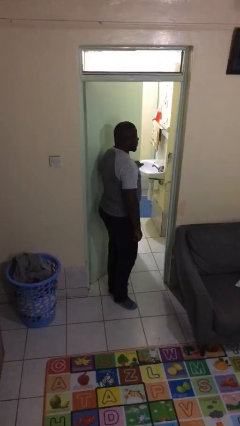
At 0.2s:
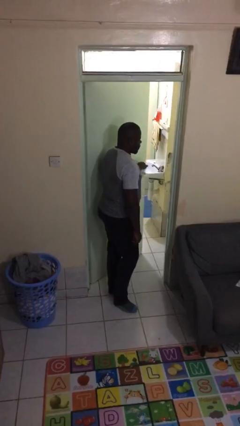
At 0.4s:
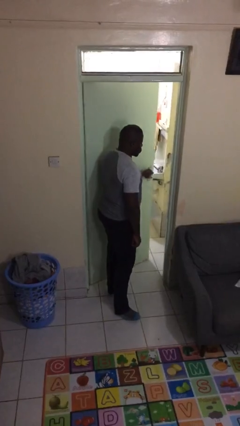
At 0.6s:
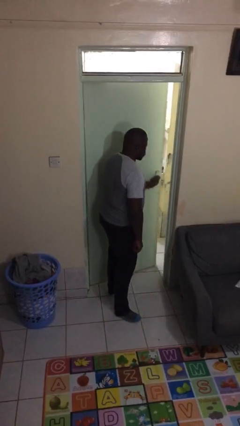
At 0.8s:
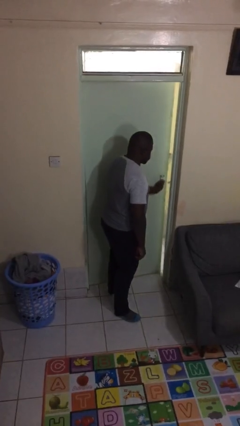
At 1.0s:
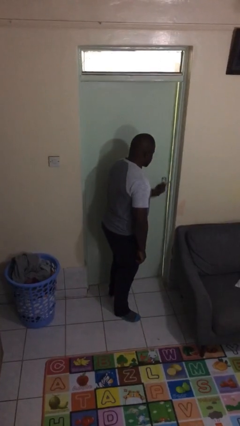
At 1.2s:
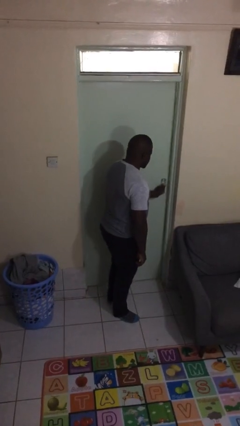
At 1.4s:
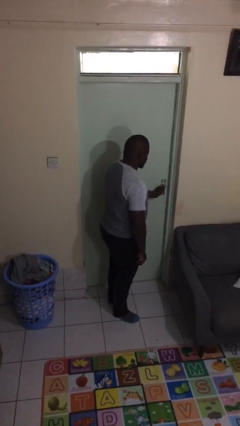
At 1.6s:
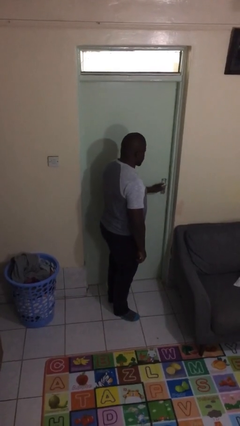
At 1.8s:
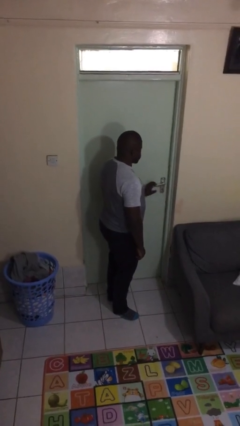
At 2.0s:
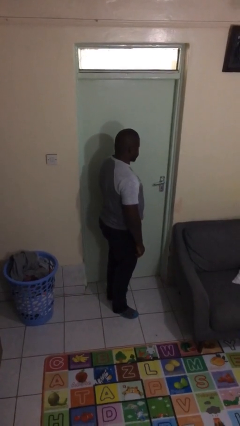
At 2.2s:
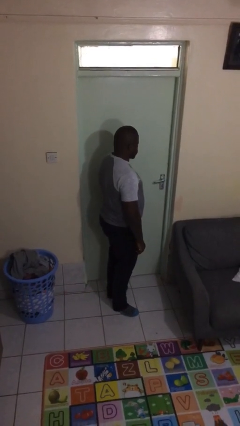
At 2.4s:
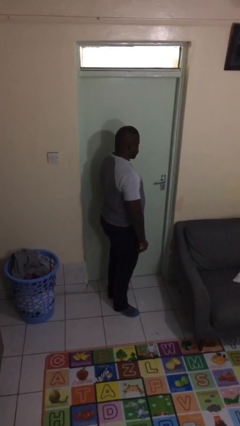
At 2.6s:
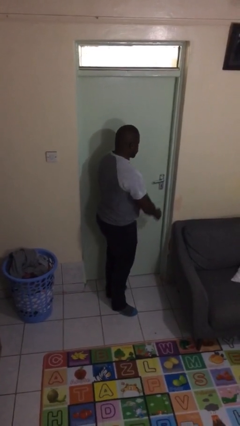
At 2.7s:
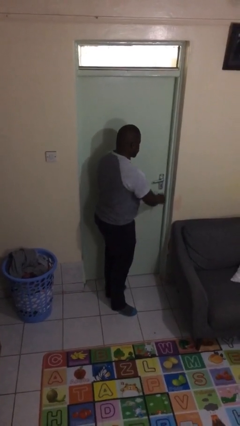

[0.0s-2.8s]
person closes facility door

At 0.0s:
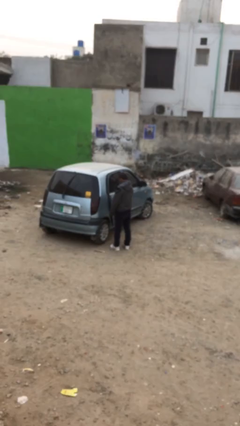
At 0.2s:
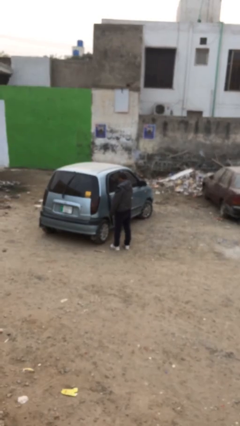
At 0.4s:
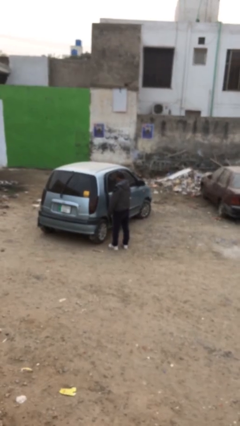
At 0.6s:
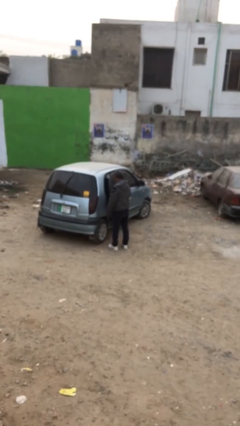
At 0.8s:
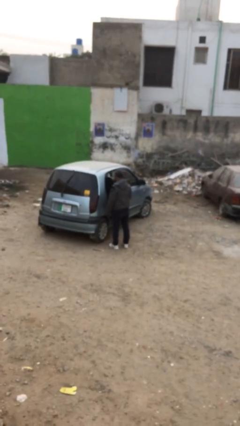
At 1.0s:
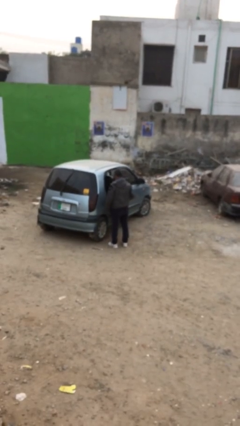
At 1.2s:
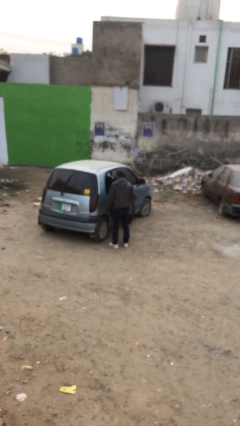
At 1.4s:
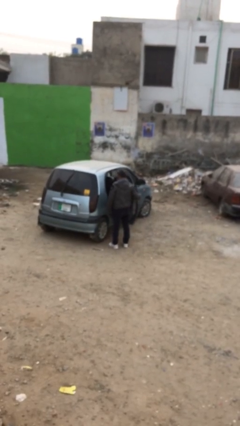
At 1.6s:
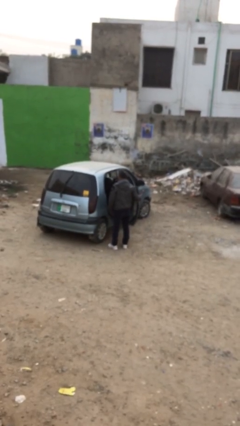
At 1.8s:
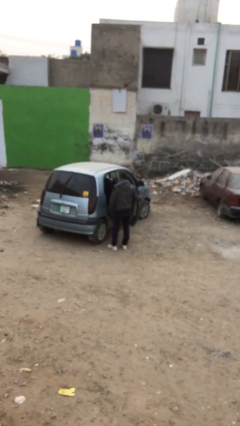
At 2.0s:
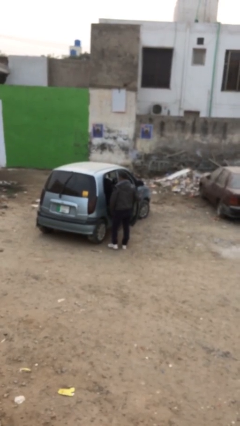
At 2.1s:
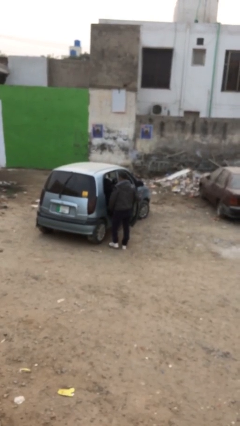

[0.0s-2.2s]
person opens car door

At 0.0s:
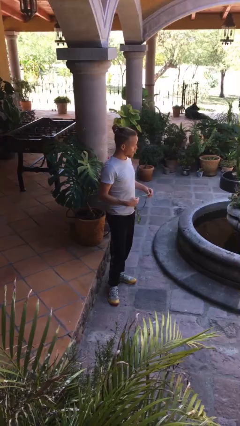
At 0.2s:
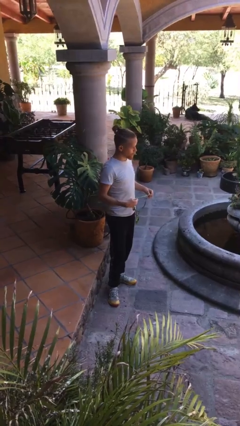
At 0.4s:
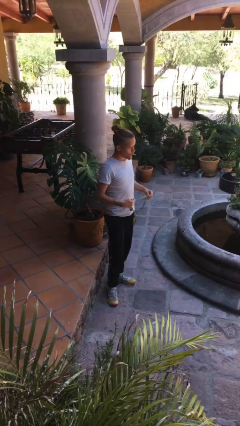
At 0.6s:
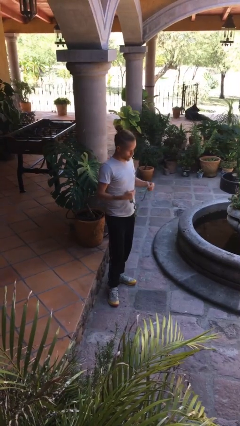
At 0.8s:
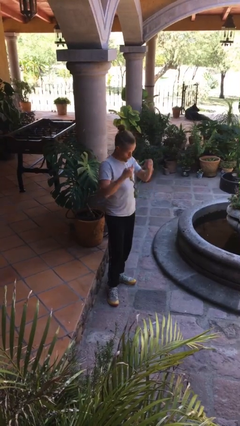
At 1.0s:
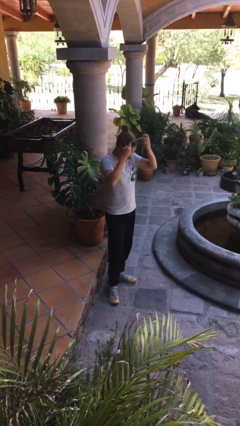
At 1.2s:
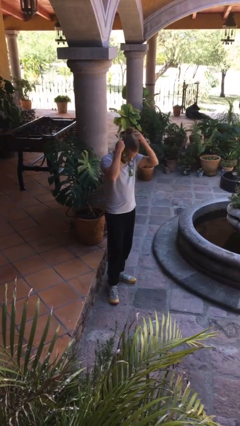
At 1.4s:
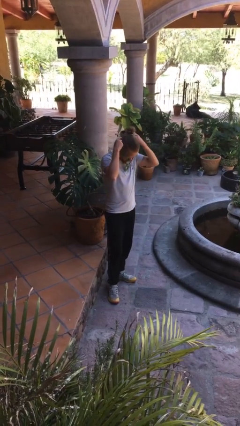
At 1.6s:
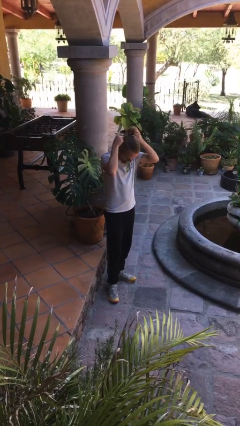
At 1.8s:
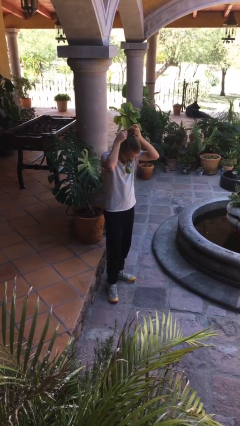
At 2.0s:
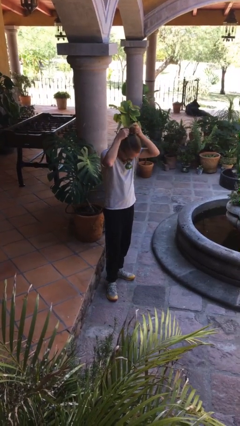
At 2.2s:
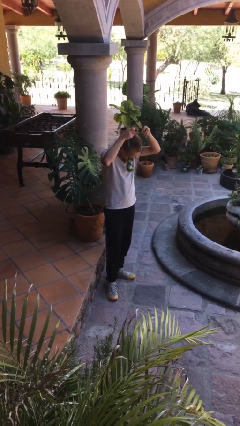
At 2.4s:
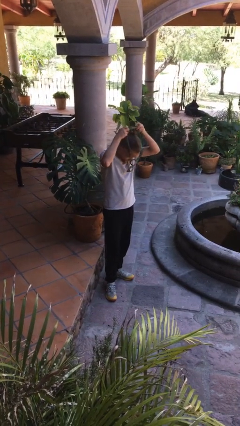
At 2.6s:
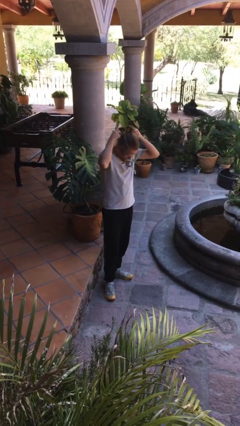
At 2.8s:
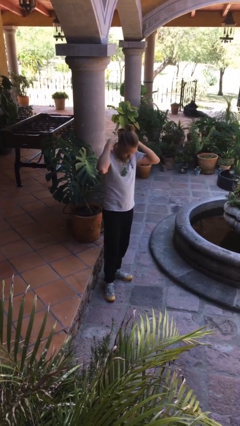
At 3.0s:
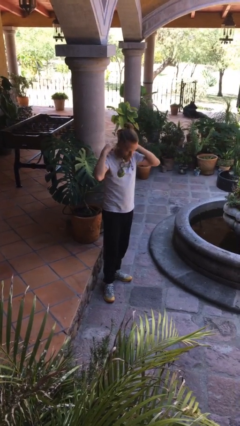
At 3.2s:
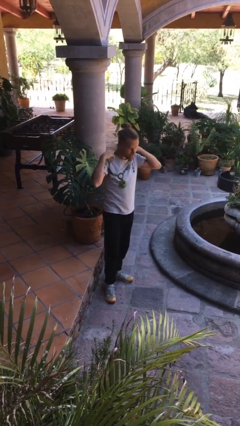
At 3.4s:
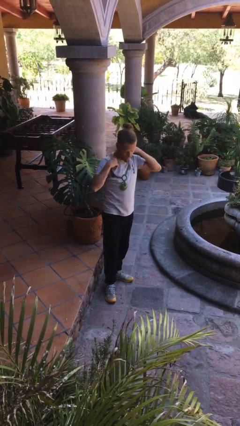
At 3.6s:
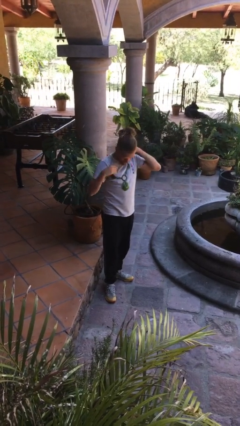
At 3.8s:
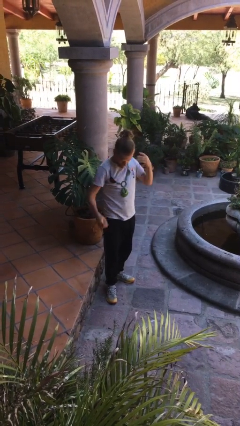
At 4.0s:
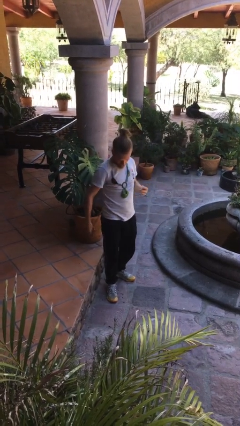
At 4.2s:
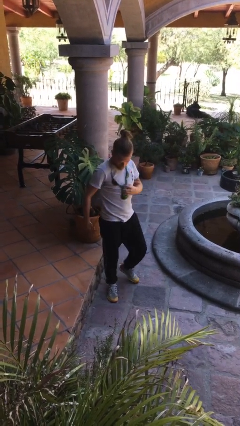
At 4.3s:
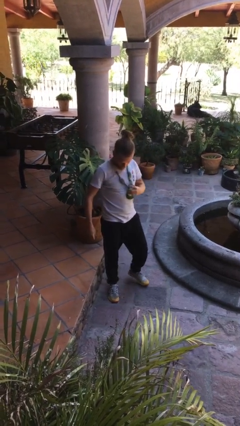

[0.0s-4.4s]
person puts on necklace

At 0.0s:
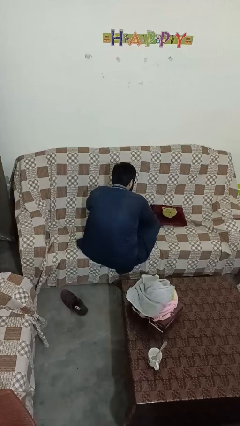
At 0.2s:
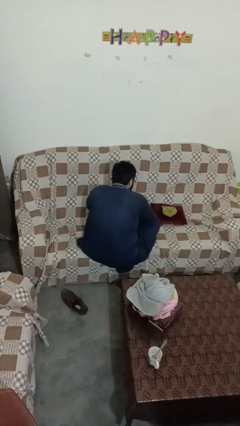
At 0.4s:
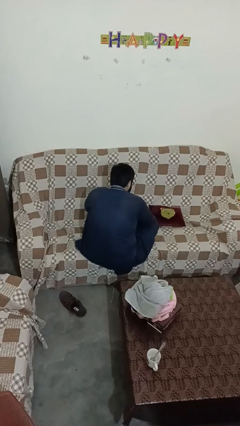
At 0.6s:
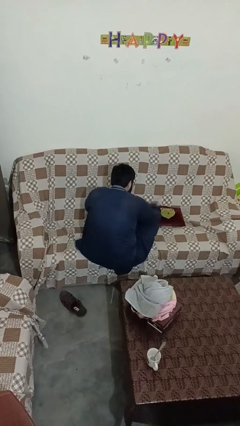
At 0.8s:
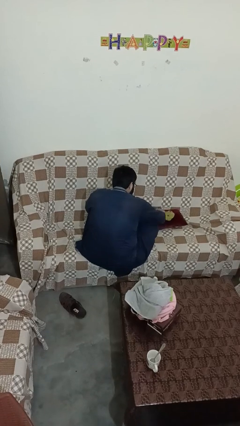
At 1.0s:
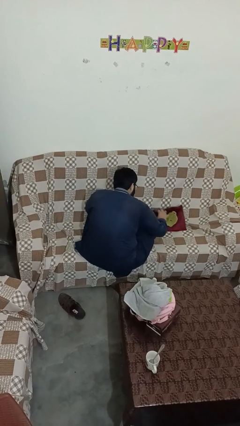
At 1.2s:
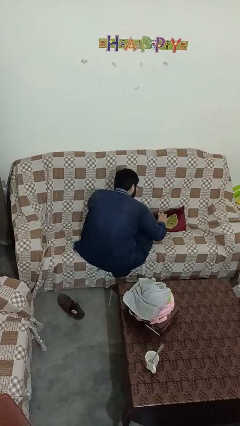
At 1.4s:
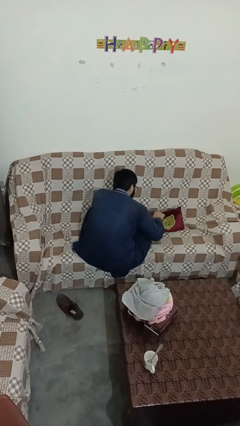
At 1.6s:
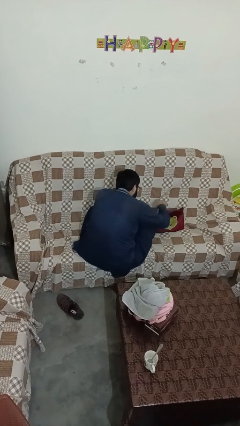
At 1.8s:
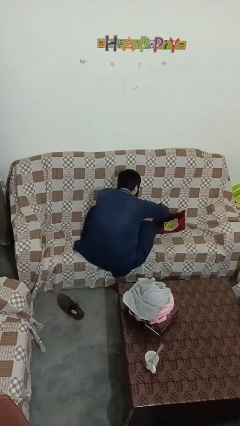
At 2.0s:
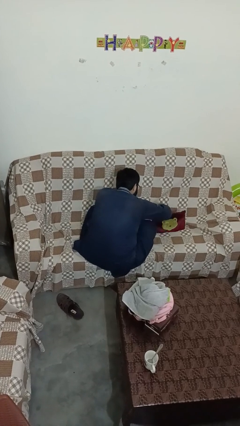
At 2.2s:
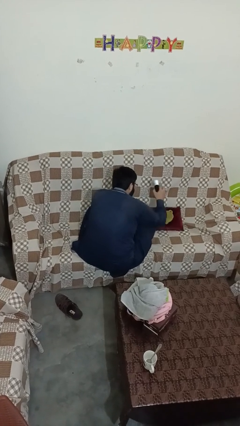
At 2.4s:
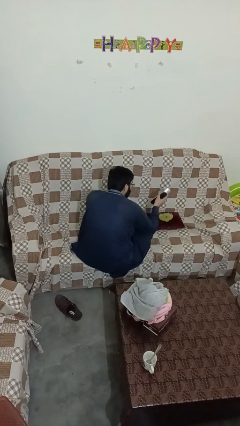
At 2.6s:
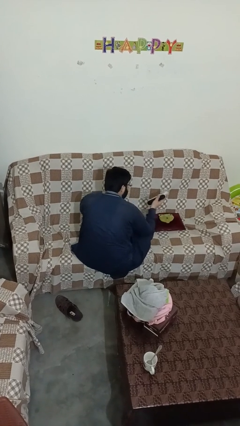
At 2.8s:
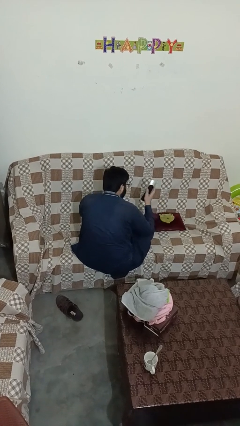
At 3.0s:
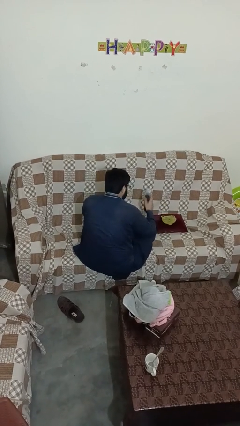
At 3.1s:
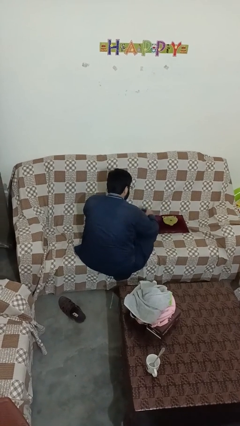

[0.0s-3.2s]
person searches in couch

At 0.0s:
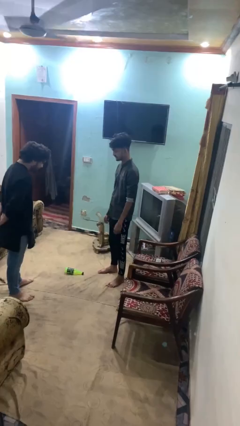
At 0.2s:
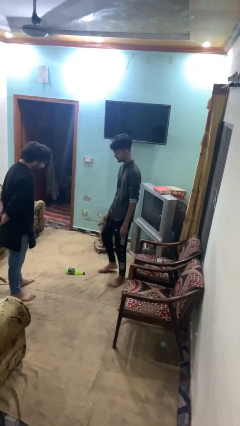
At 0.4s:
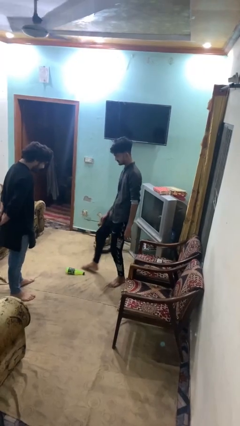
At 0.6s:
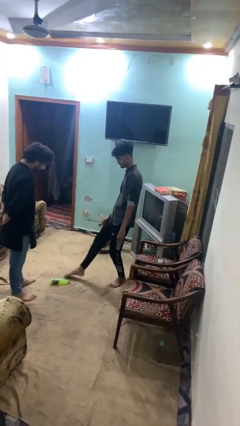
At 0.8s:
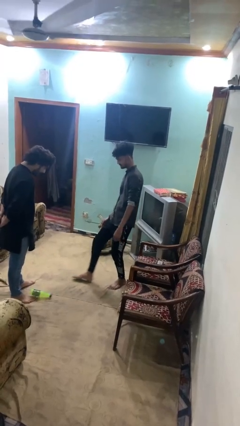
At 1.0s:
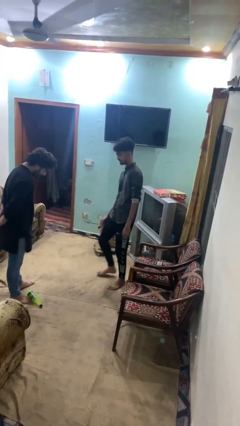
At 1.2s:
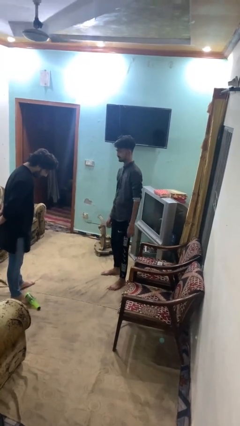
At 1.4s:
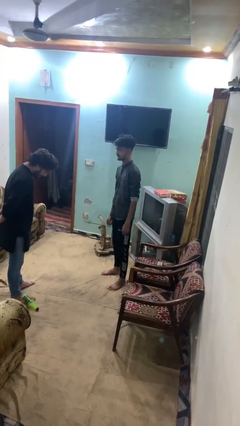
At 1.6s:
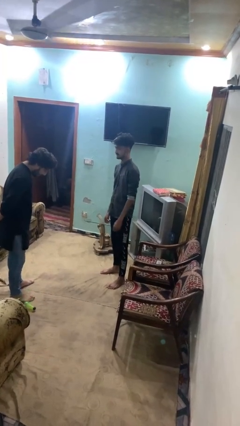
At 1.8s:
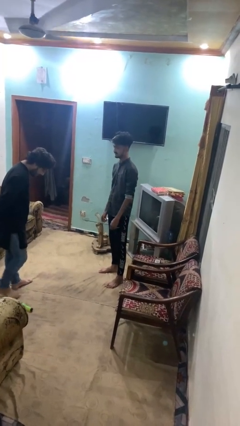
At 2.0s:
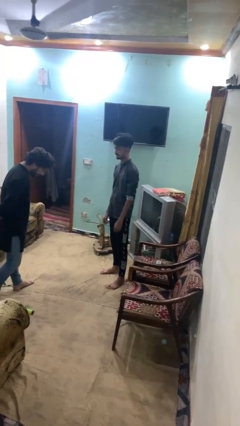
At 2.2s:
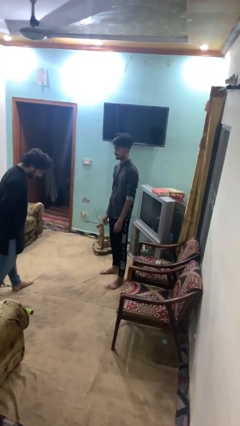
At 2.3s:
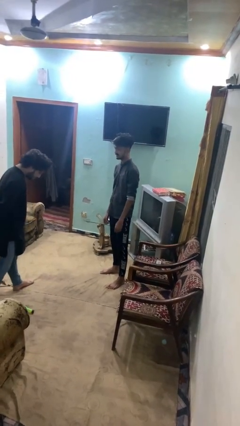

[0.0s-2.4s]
person kicks object to person

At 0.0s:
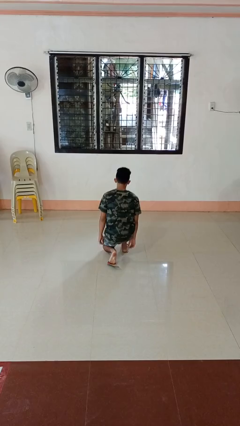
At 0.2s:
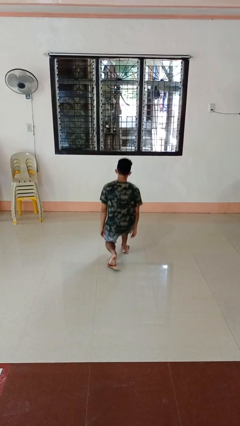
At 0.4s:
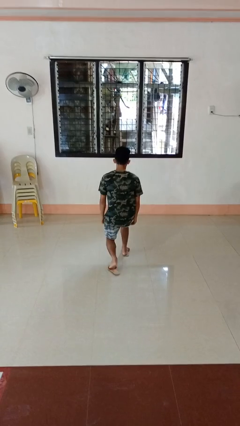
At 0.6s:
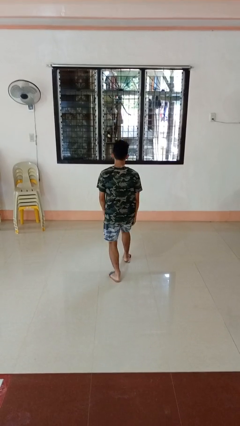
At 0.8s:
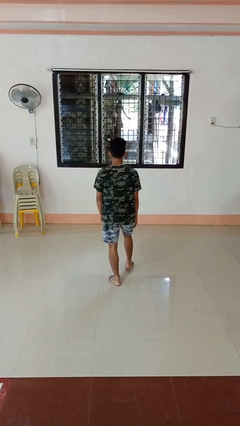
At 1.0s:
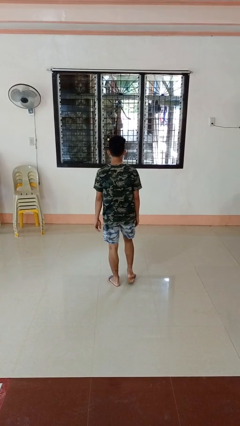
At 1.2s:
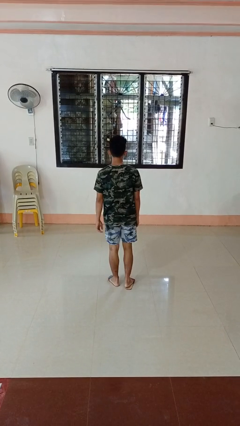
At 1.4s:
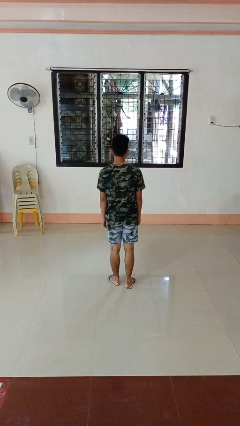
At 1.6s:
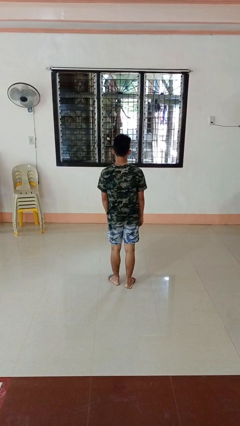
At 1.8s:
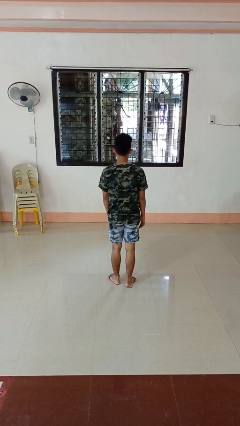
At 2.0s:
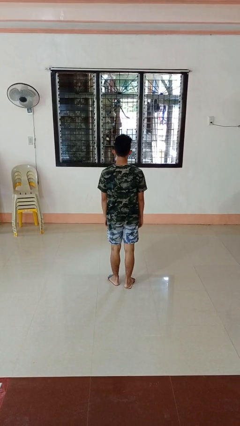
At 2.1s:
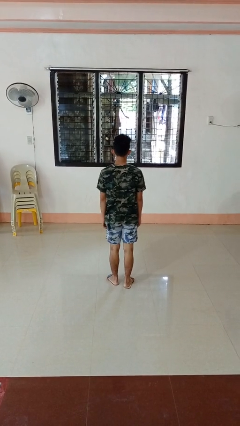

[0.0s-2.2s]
person stands up from floor

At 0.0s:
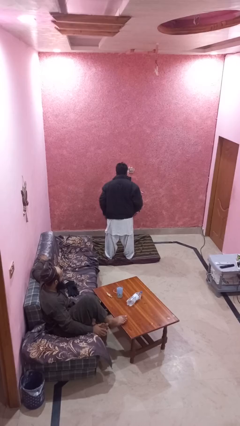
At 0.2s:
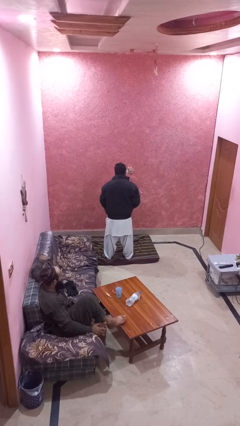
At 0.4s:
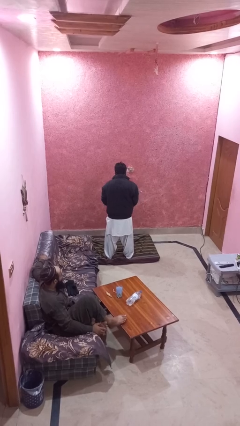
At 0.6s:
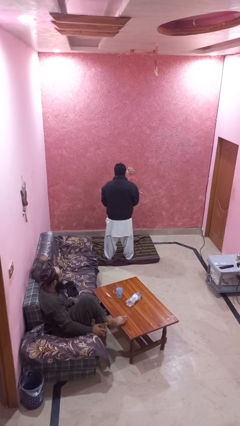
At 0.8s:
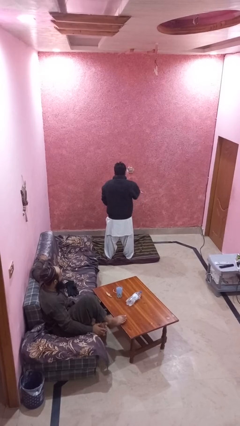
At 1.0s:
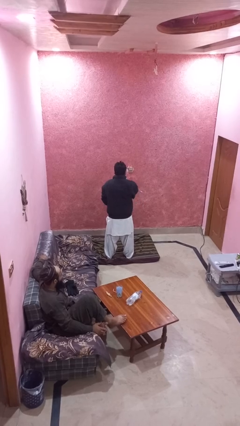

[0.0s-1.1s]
person zips up jacket
